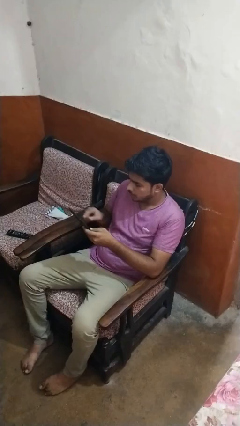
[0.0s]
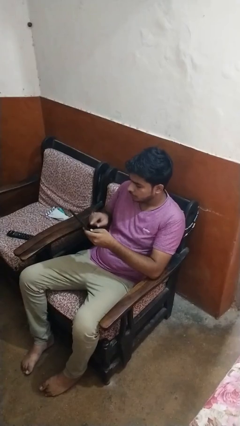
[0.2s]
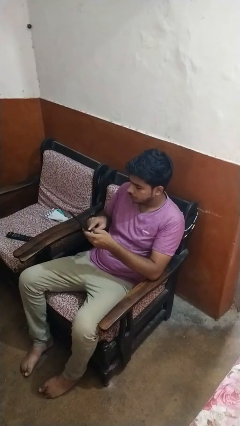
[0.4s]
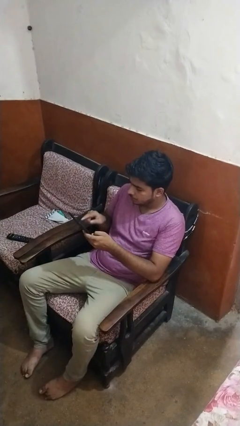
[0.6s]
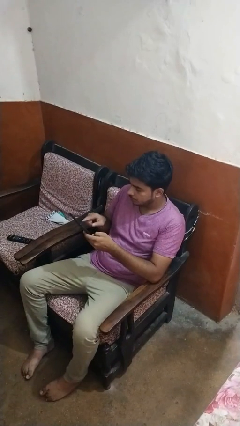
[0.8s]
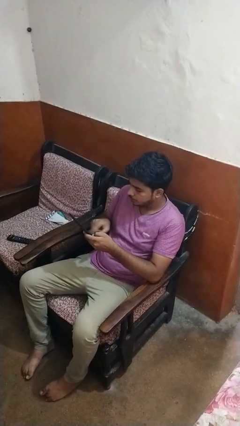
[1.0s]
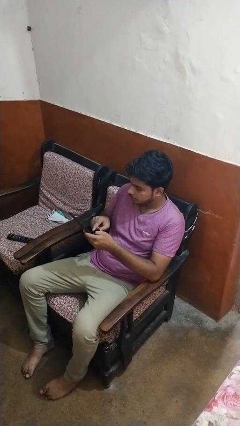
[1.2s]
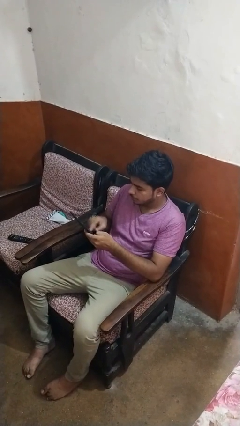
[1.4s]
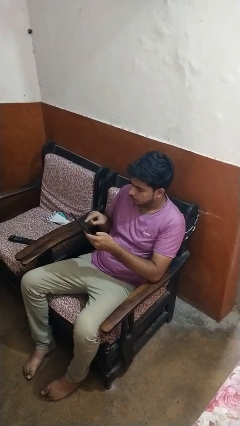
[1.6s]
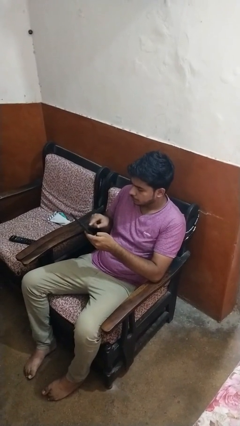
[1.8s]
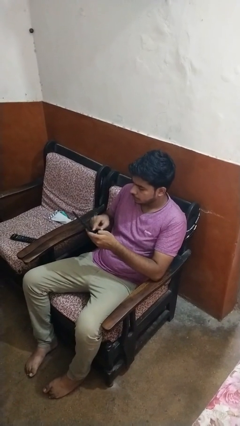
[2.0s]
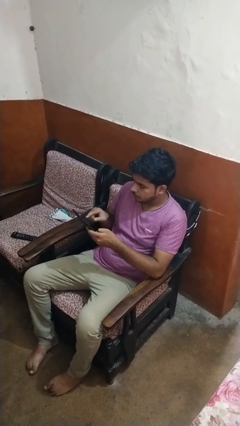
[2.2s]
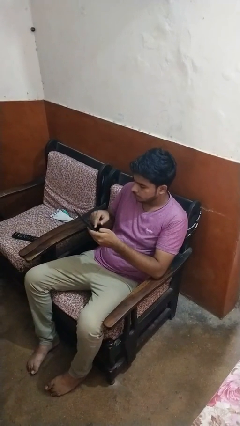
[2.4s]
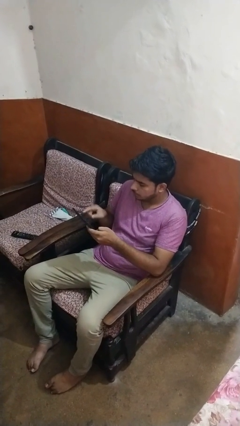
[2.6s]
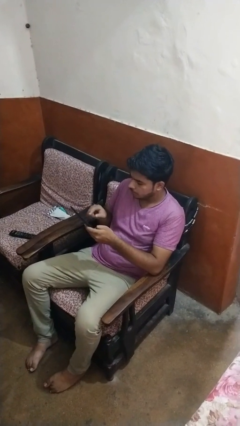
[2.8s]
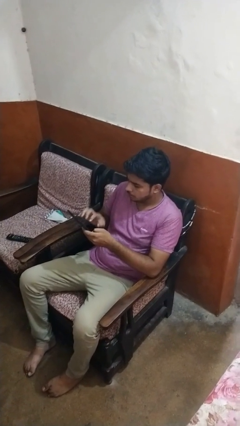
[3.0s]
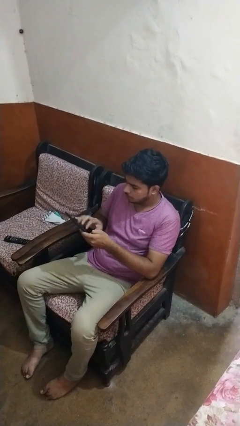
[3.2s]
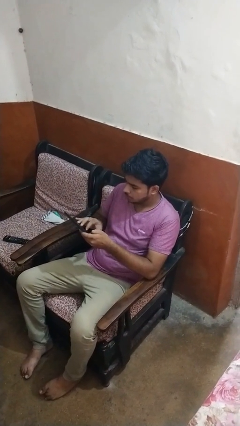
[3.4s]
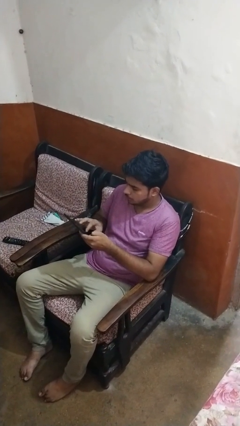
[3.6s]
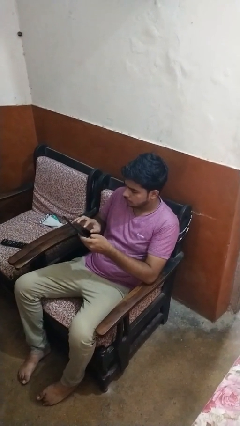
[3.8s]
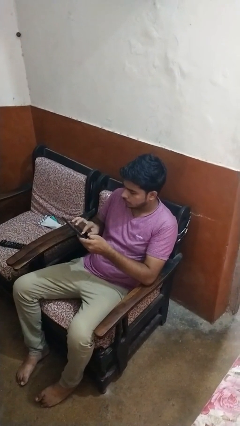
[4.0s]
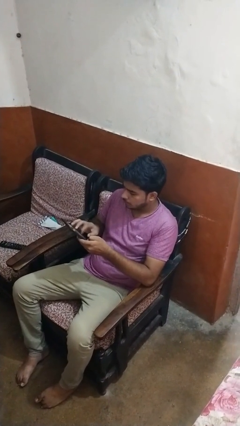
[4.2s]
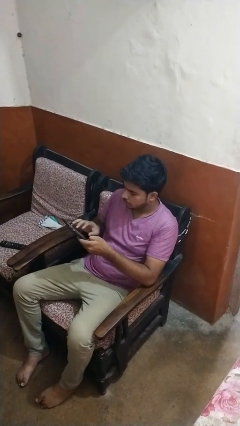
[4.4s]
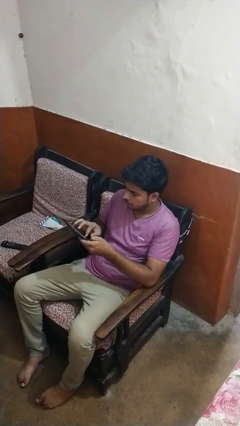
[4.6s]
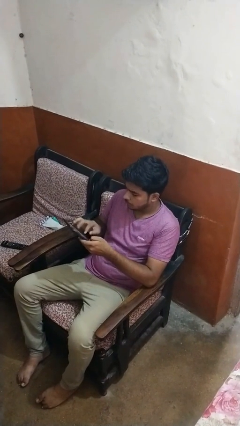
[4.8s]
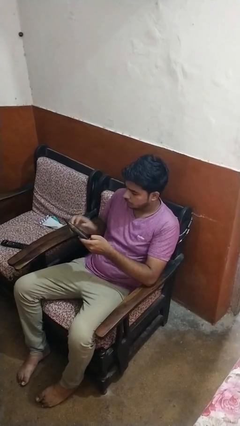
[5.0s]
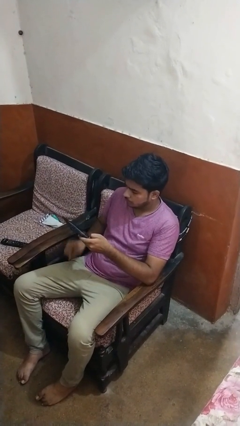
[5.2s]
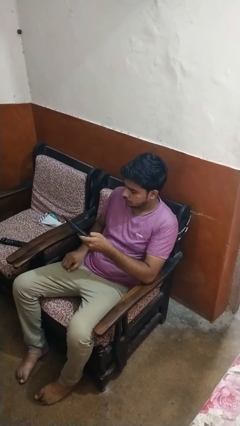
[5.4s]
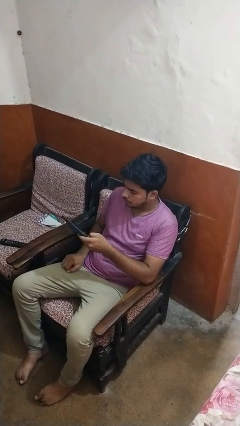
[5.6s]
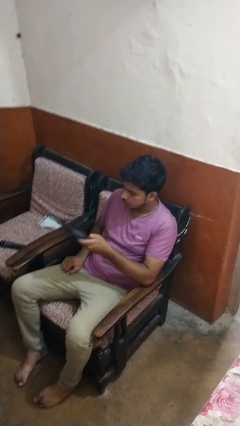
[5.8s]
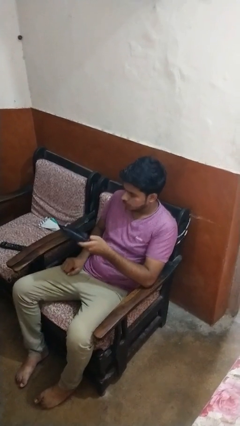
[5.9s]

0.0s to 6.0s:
person interacts with tablet

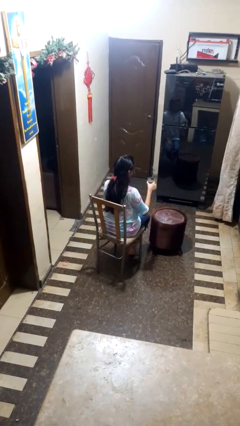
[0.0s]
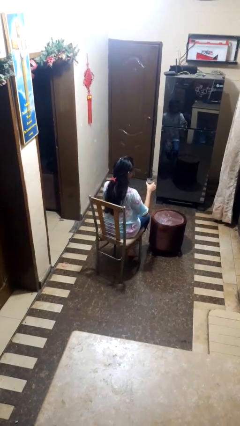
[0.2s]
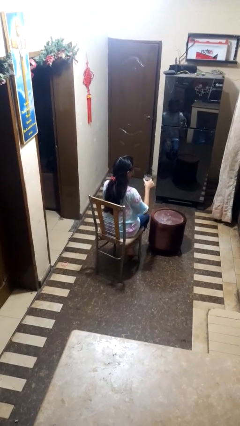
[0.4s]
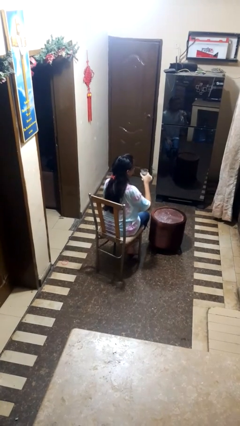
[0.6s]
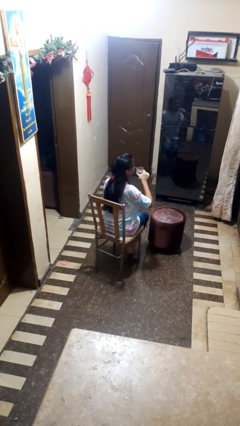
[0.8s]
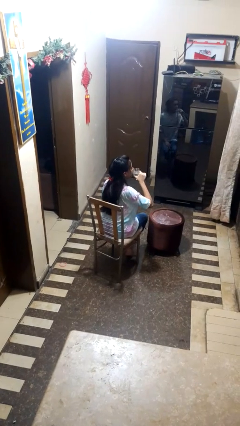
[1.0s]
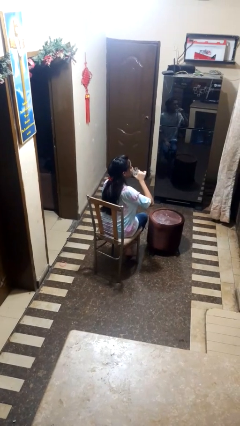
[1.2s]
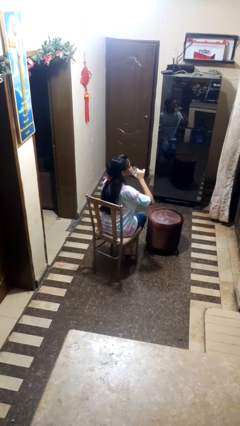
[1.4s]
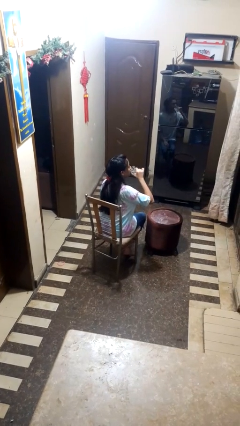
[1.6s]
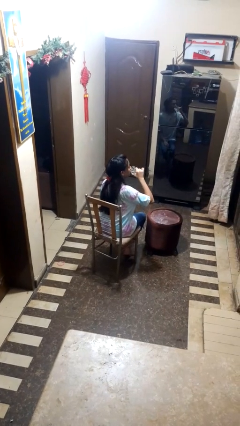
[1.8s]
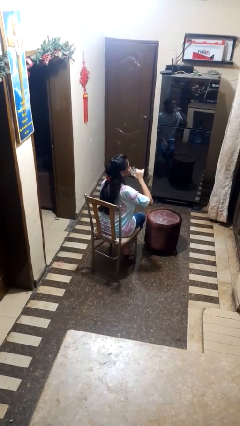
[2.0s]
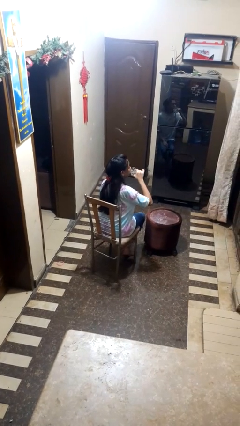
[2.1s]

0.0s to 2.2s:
person drinks from shotglass

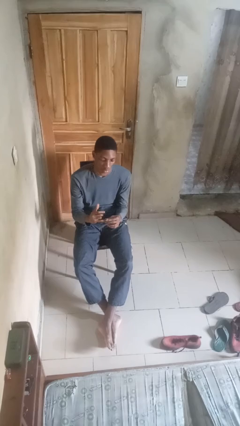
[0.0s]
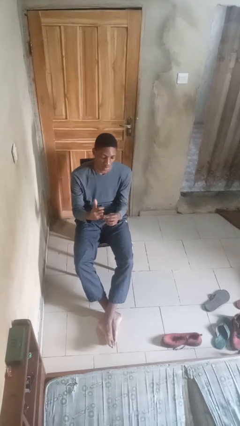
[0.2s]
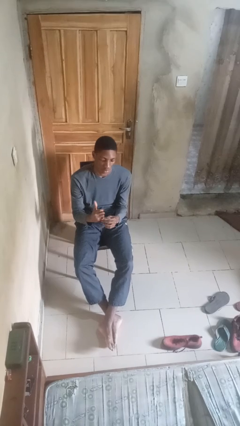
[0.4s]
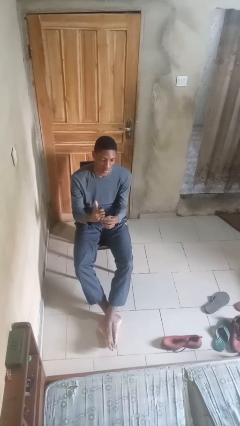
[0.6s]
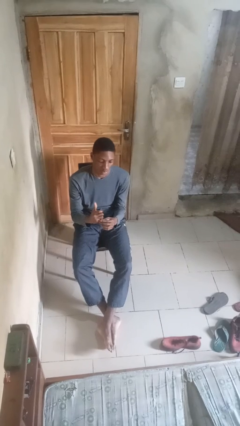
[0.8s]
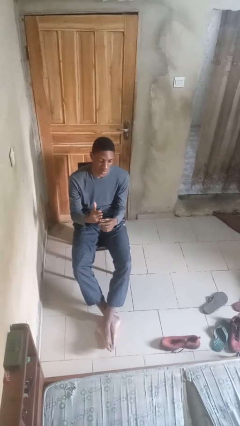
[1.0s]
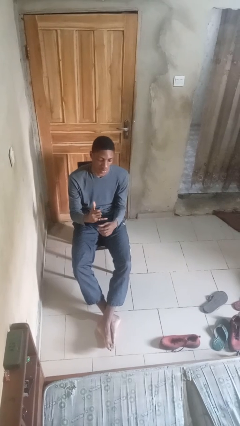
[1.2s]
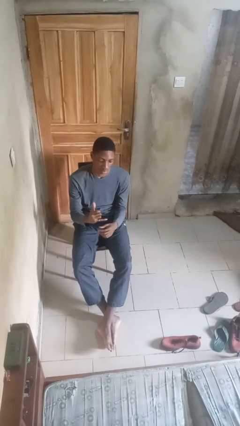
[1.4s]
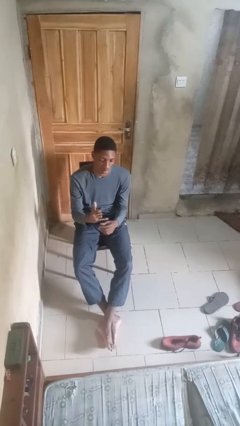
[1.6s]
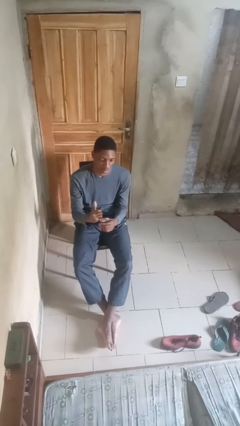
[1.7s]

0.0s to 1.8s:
person puts on ring

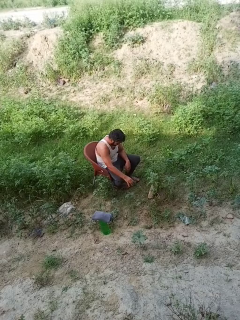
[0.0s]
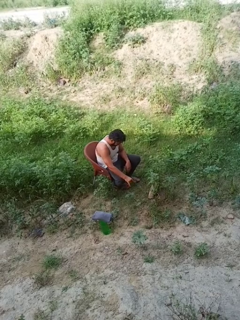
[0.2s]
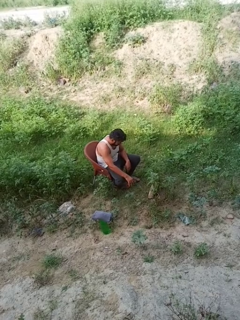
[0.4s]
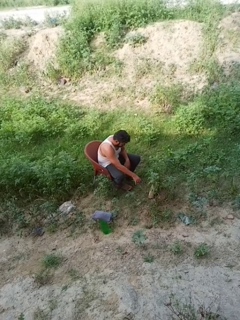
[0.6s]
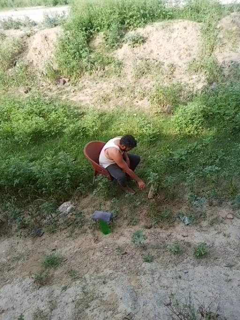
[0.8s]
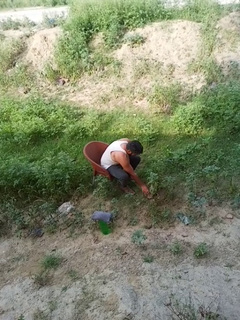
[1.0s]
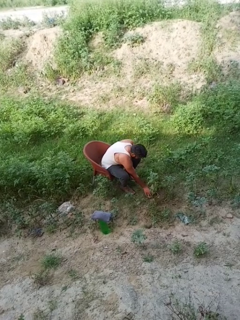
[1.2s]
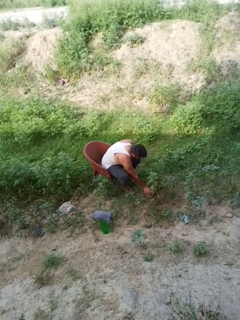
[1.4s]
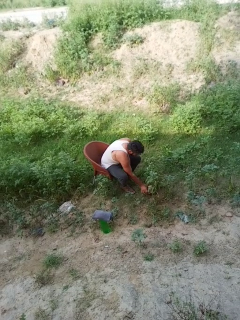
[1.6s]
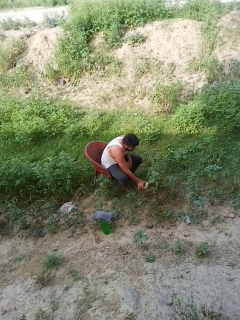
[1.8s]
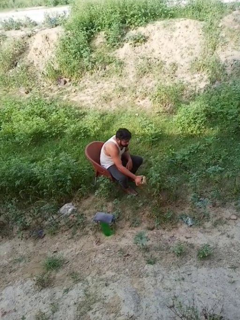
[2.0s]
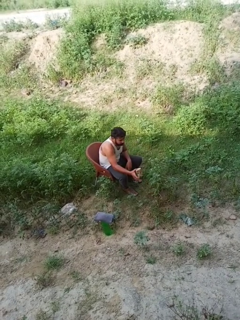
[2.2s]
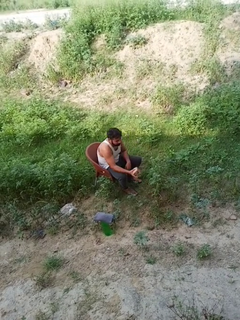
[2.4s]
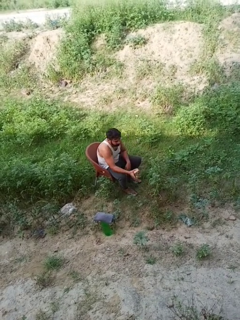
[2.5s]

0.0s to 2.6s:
person picks up object from floor

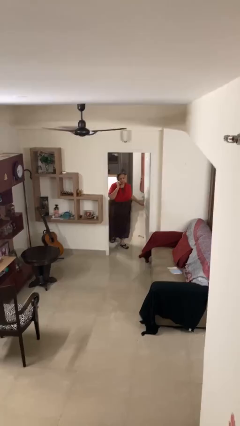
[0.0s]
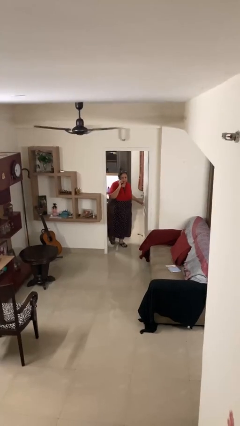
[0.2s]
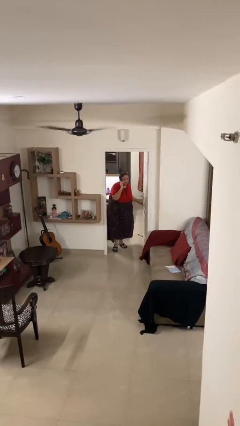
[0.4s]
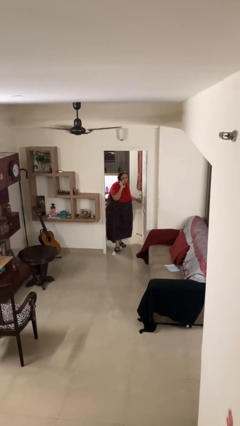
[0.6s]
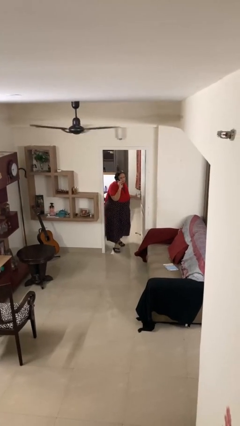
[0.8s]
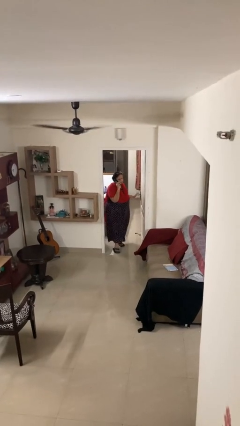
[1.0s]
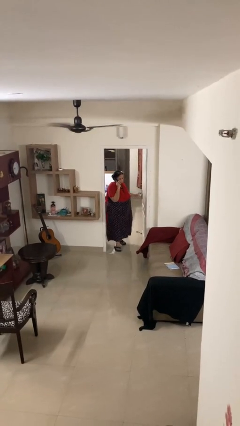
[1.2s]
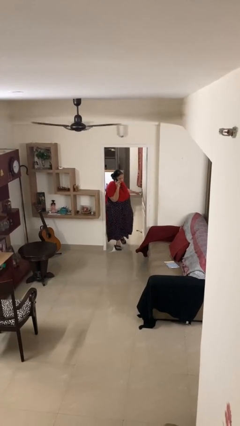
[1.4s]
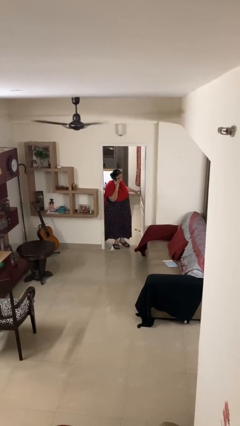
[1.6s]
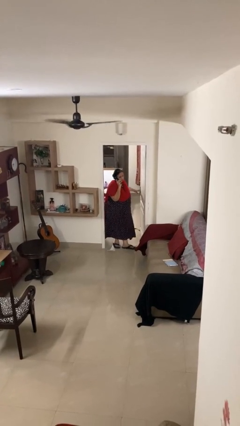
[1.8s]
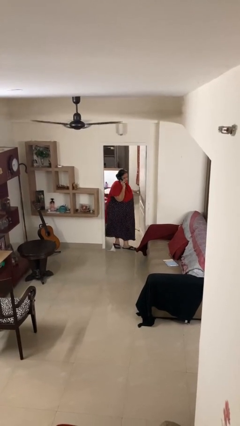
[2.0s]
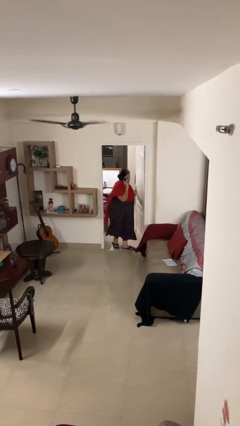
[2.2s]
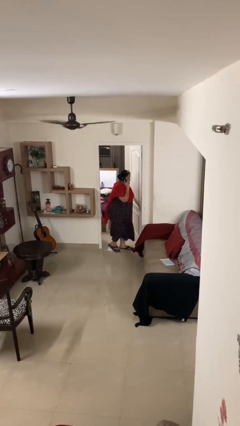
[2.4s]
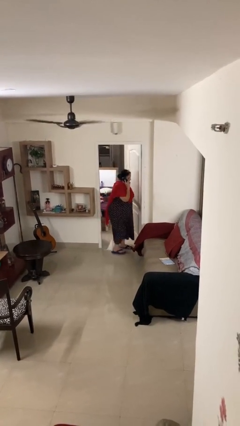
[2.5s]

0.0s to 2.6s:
person enters scene through structure

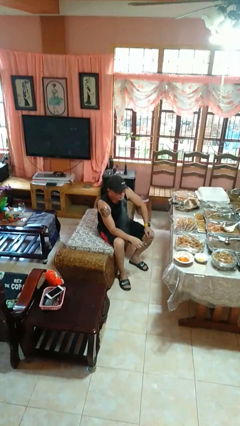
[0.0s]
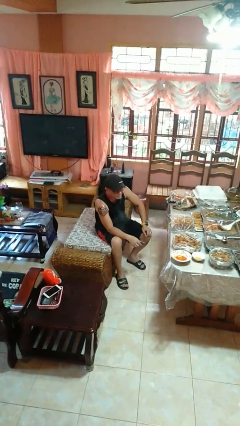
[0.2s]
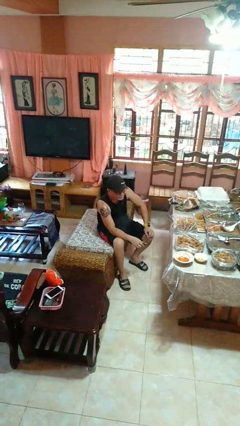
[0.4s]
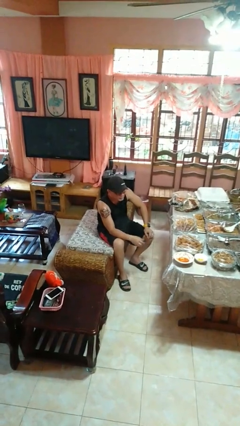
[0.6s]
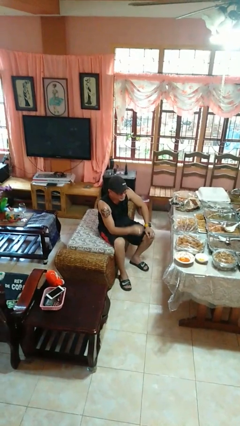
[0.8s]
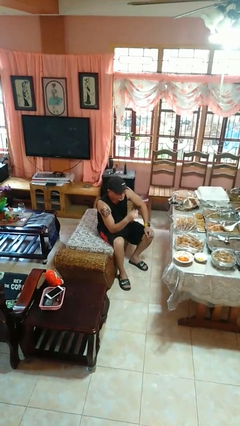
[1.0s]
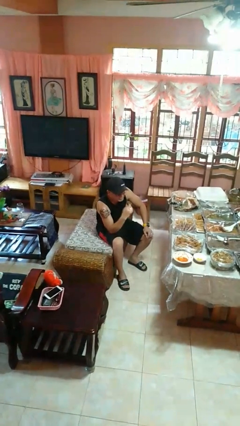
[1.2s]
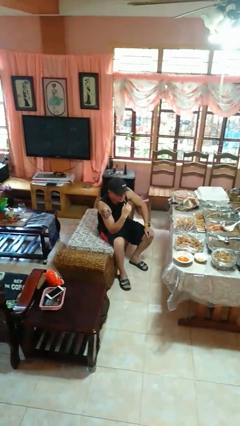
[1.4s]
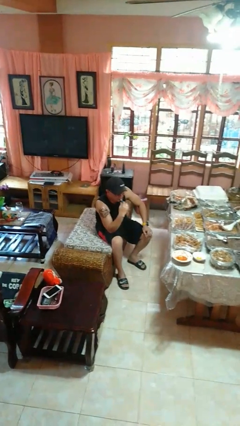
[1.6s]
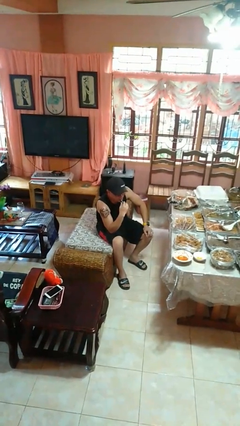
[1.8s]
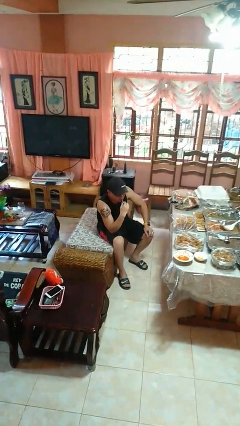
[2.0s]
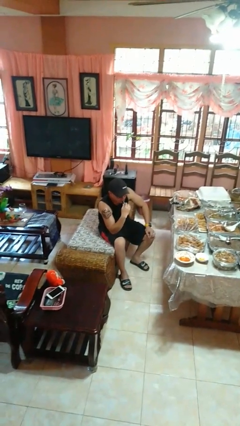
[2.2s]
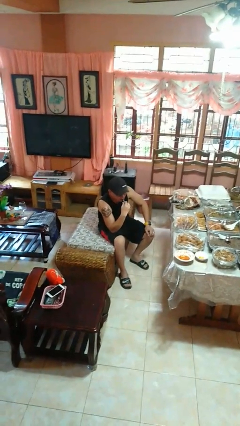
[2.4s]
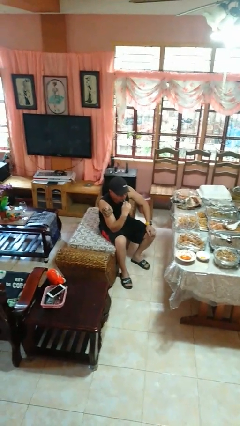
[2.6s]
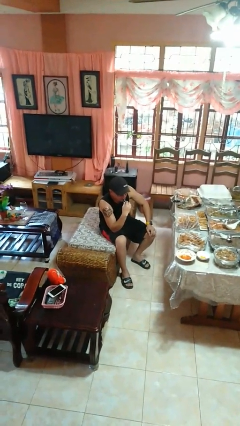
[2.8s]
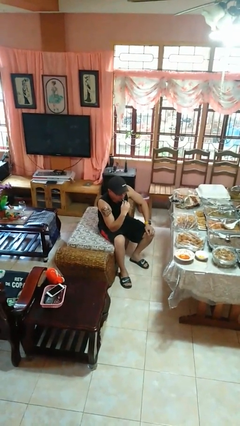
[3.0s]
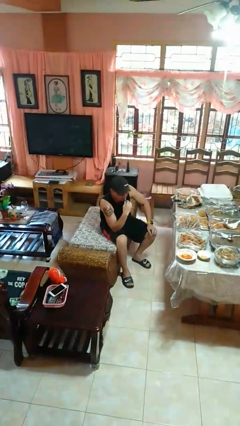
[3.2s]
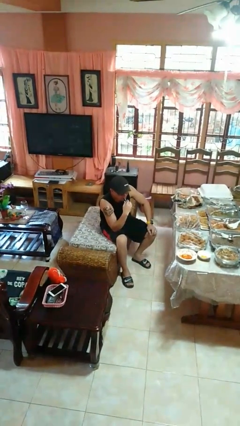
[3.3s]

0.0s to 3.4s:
person vapes
